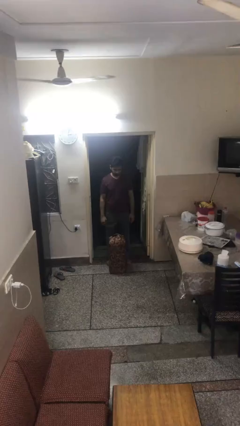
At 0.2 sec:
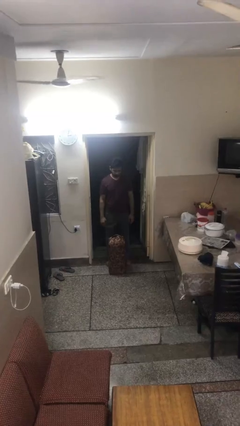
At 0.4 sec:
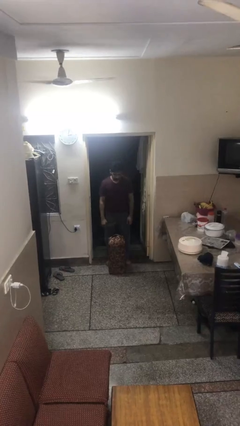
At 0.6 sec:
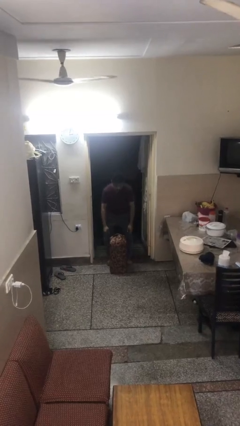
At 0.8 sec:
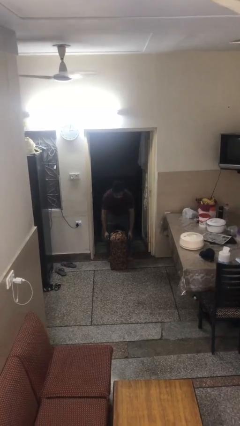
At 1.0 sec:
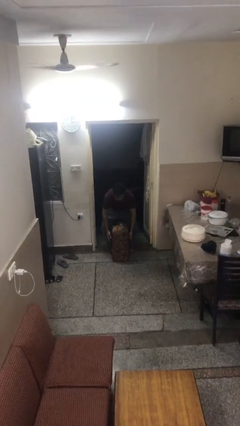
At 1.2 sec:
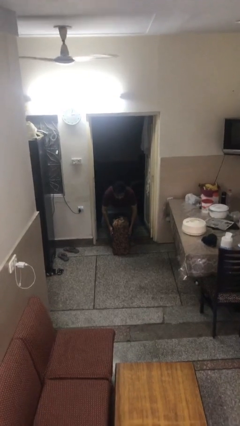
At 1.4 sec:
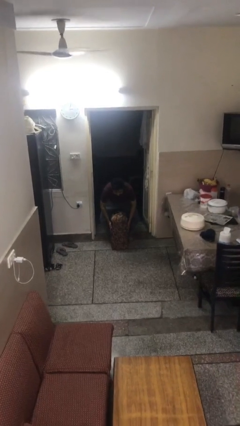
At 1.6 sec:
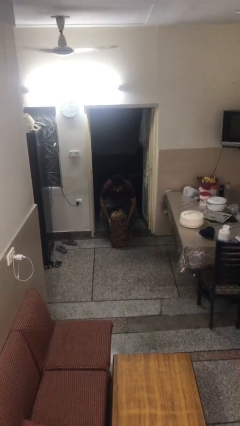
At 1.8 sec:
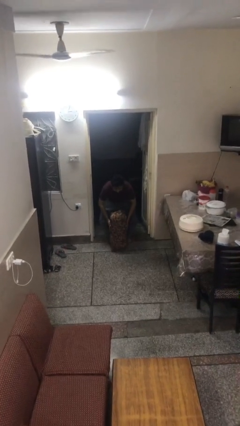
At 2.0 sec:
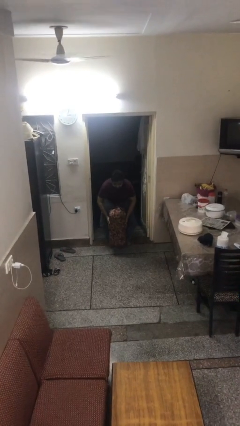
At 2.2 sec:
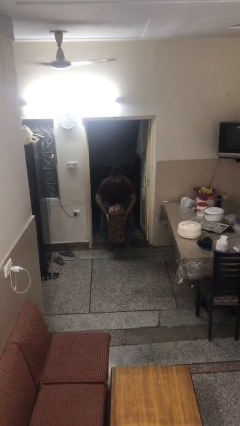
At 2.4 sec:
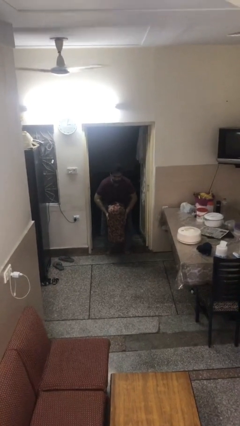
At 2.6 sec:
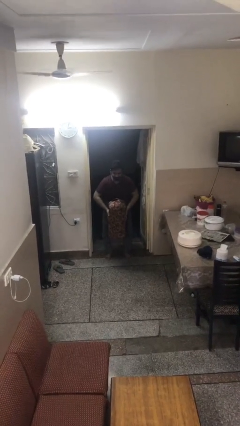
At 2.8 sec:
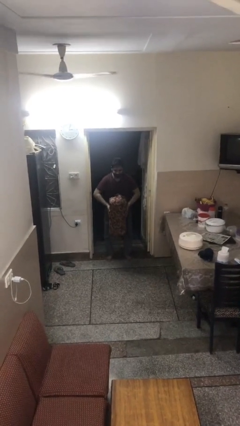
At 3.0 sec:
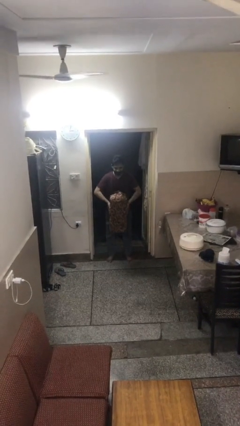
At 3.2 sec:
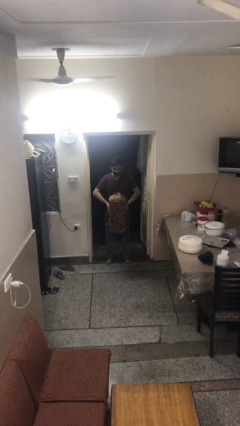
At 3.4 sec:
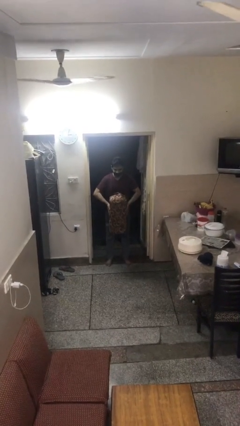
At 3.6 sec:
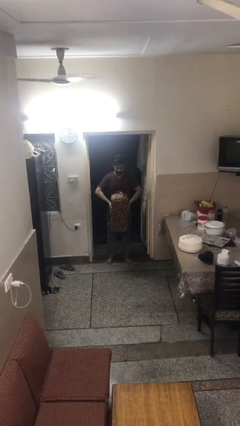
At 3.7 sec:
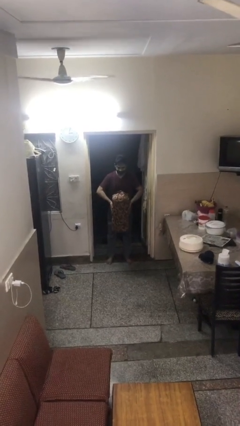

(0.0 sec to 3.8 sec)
person picks up object from floor

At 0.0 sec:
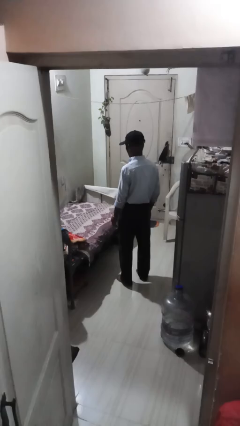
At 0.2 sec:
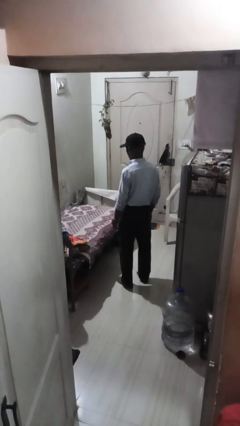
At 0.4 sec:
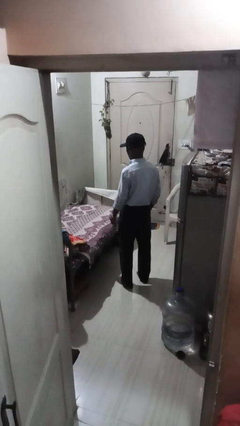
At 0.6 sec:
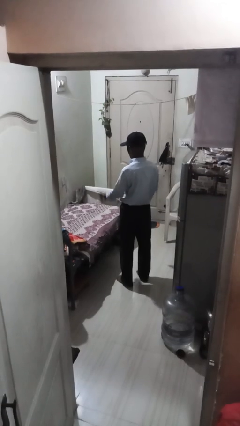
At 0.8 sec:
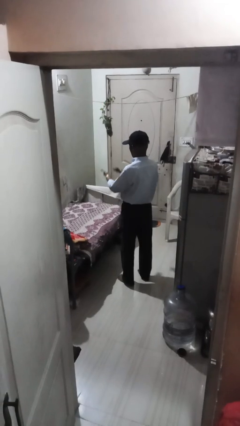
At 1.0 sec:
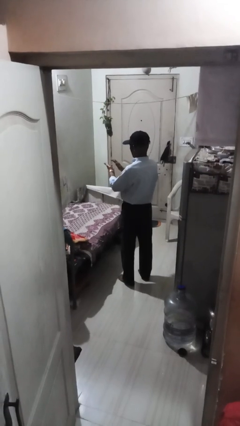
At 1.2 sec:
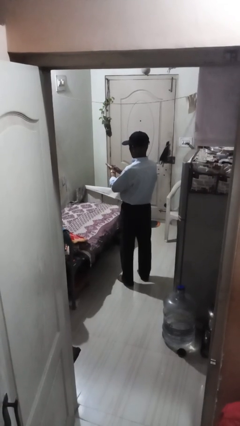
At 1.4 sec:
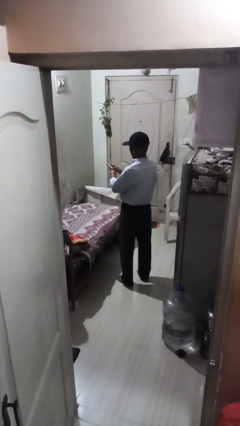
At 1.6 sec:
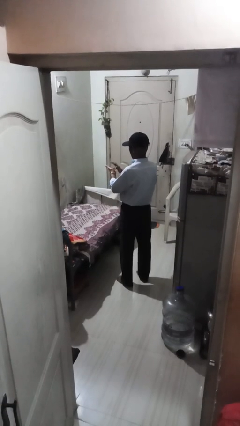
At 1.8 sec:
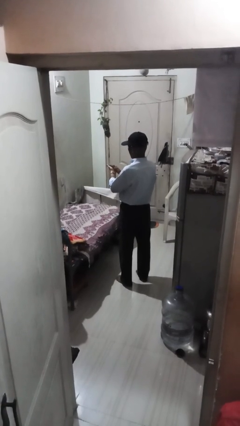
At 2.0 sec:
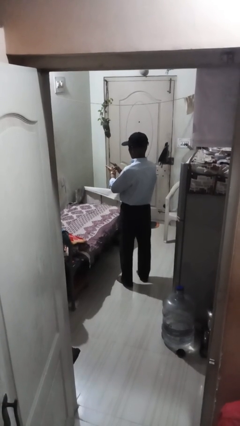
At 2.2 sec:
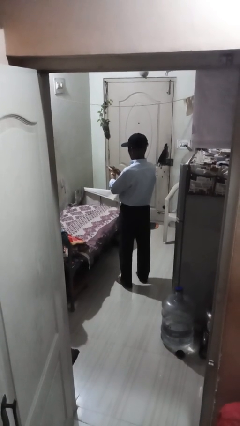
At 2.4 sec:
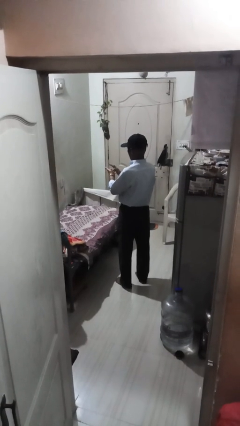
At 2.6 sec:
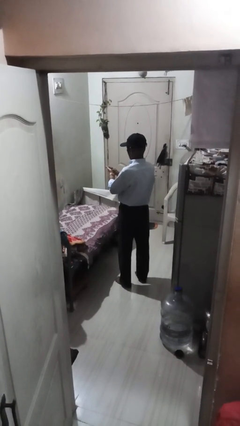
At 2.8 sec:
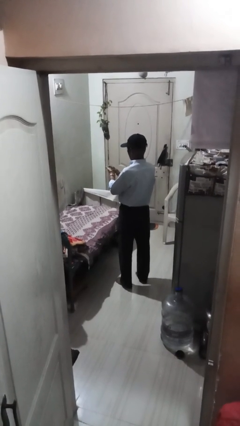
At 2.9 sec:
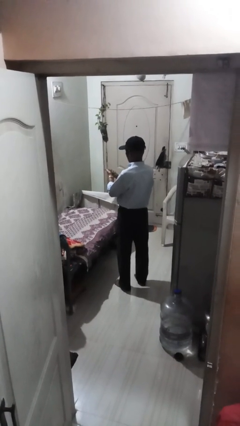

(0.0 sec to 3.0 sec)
person claps hands

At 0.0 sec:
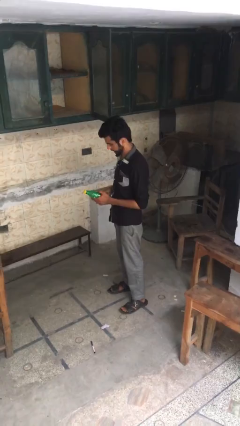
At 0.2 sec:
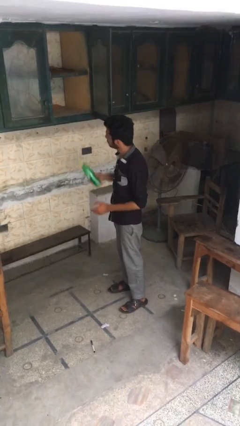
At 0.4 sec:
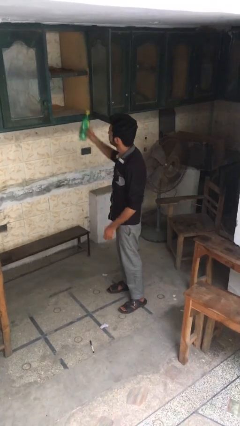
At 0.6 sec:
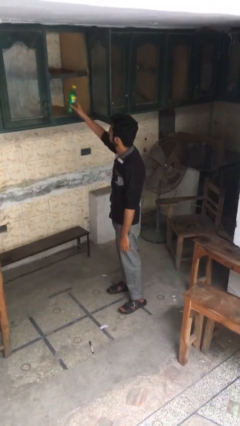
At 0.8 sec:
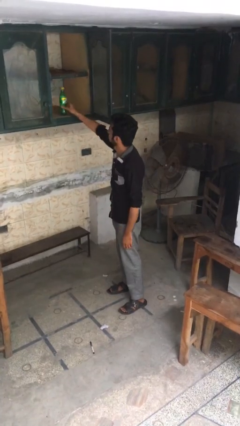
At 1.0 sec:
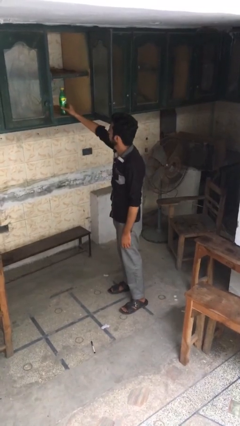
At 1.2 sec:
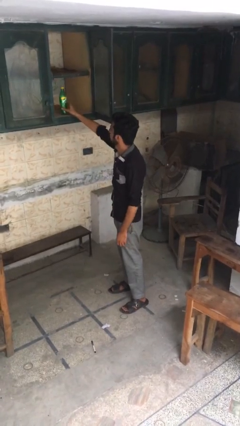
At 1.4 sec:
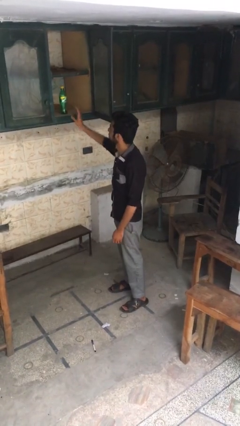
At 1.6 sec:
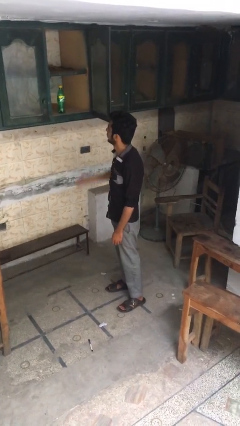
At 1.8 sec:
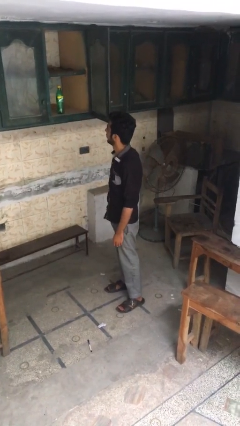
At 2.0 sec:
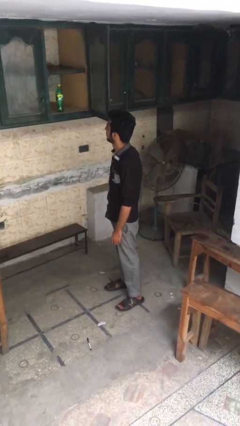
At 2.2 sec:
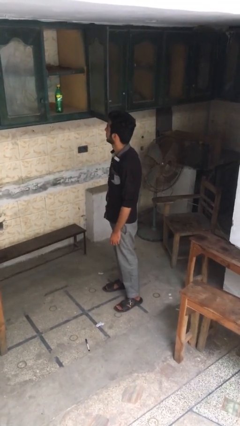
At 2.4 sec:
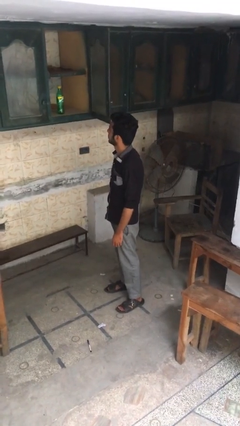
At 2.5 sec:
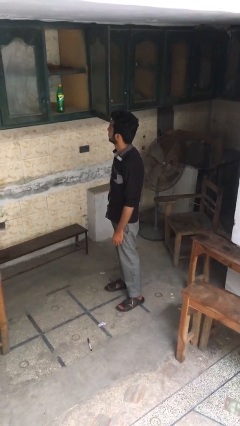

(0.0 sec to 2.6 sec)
person puts object in cabinet

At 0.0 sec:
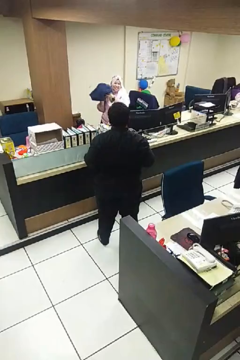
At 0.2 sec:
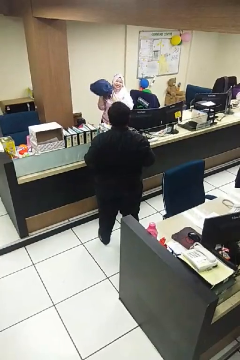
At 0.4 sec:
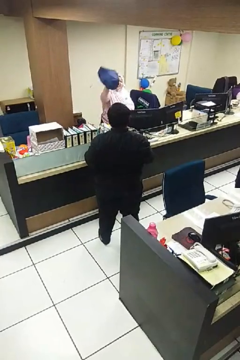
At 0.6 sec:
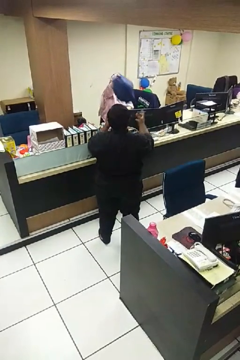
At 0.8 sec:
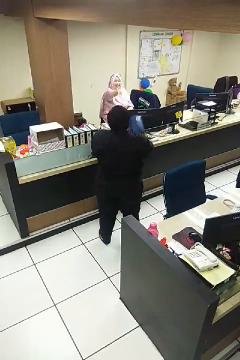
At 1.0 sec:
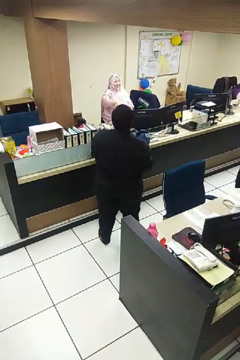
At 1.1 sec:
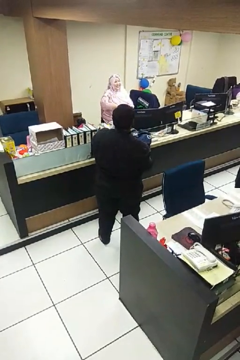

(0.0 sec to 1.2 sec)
person catches object from person

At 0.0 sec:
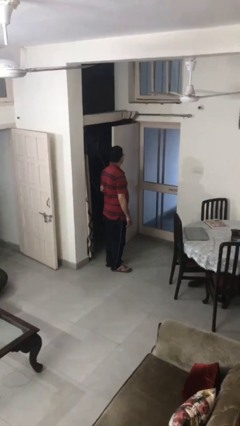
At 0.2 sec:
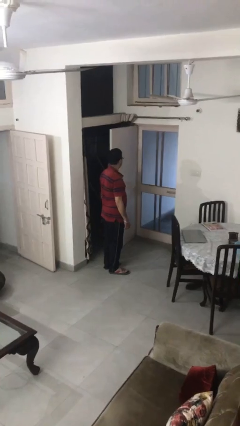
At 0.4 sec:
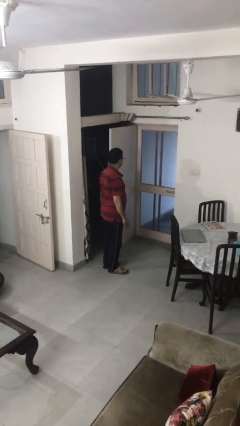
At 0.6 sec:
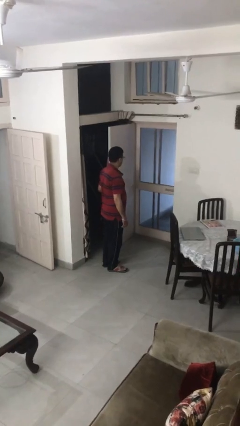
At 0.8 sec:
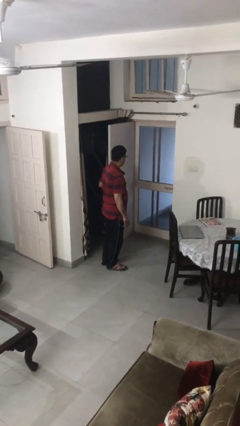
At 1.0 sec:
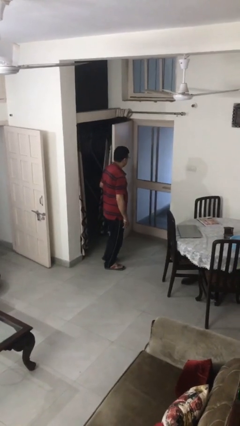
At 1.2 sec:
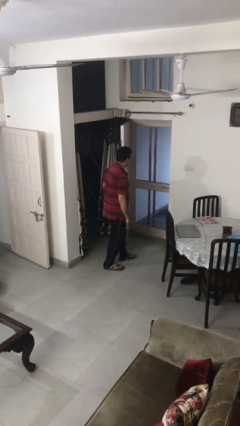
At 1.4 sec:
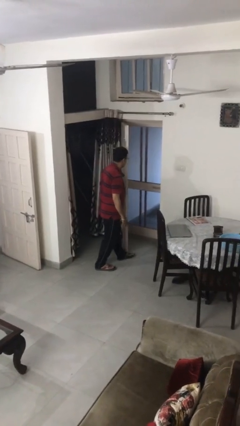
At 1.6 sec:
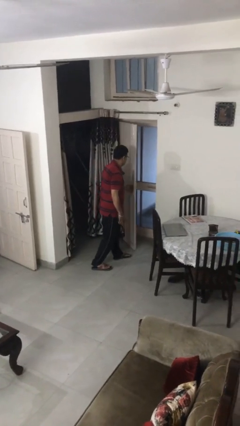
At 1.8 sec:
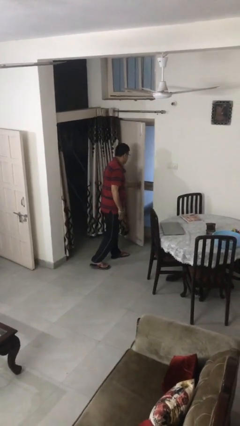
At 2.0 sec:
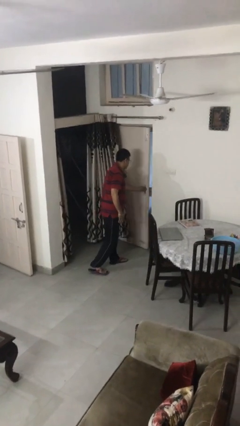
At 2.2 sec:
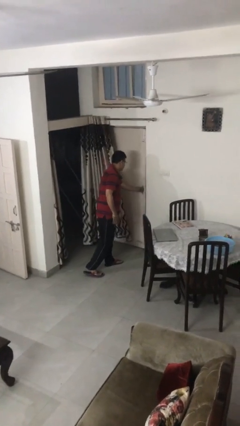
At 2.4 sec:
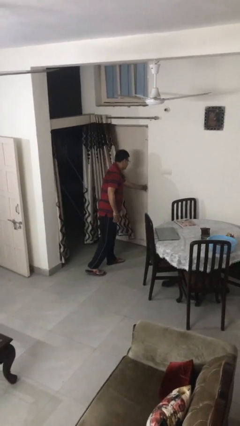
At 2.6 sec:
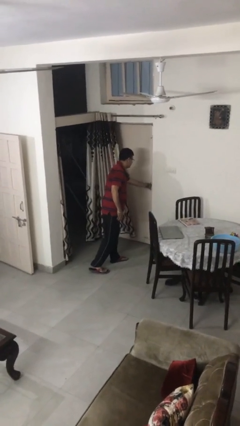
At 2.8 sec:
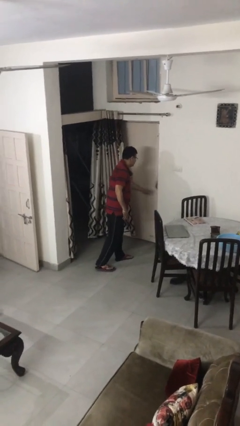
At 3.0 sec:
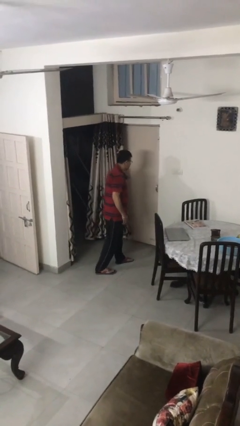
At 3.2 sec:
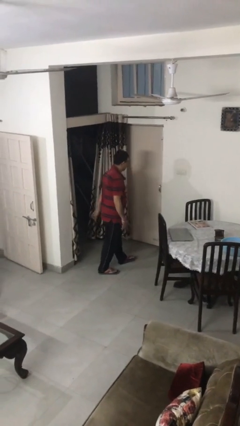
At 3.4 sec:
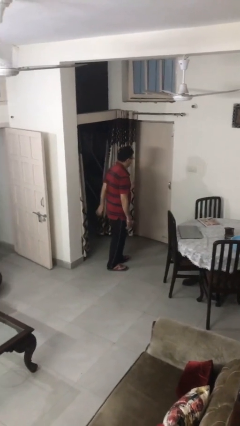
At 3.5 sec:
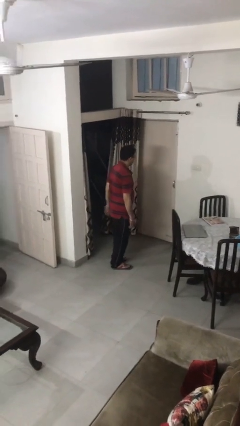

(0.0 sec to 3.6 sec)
person closes facility door

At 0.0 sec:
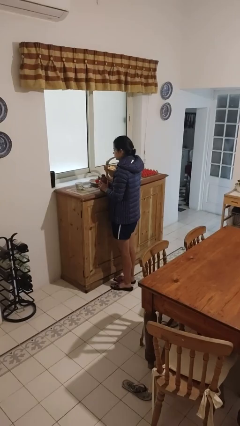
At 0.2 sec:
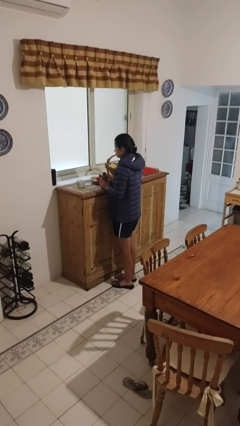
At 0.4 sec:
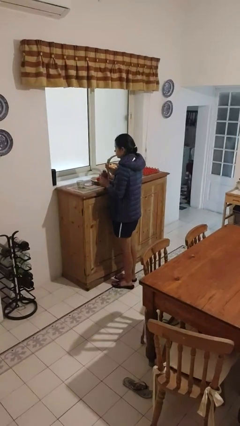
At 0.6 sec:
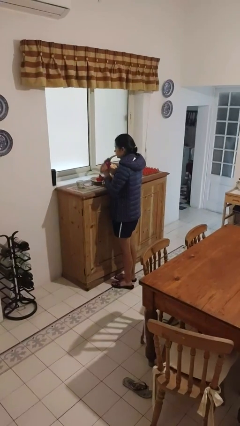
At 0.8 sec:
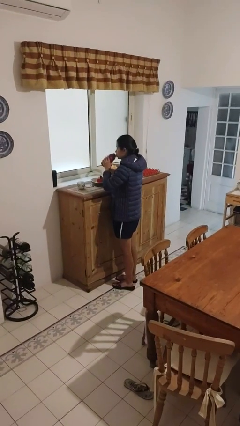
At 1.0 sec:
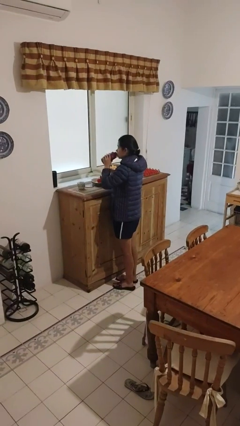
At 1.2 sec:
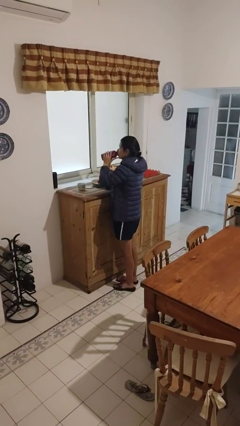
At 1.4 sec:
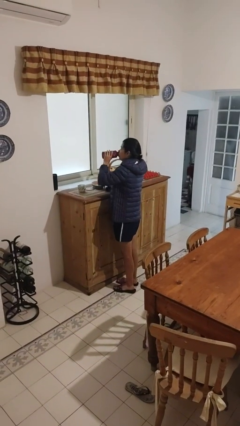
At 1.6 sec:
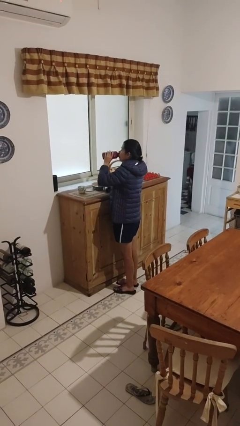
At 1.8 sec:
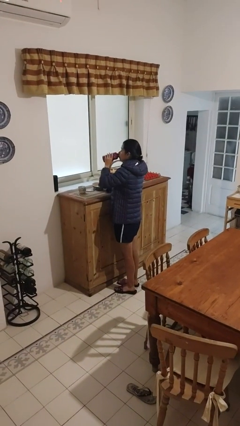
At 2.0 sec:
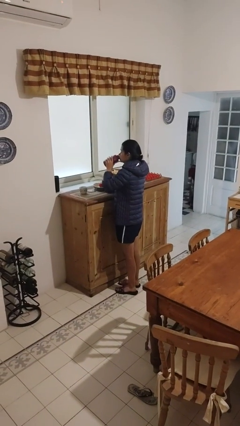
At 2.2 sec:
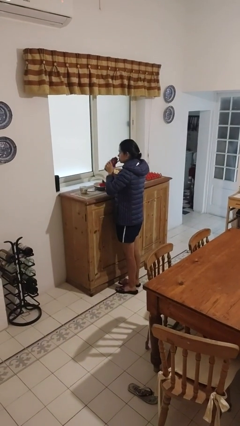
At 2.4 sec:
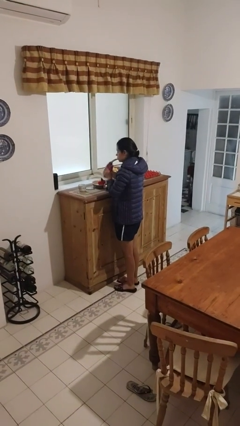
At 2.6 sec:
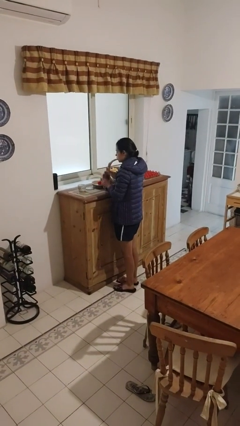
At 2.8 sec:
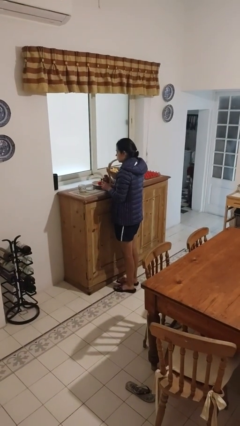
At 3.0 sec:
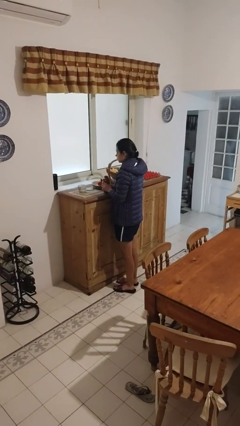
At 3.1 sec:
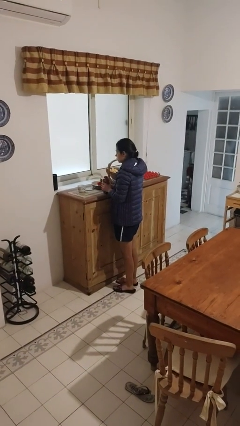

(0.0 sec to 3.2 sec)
person drinks from bottle
